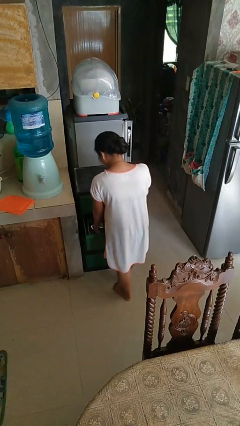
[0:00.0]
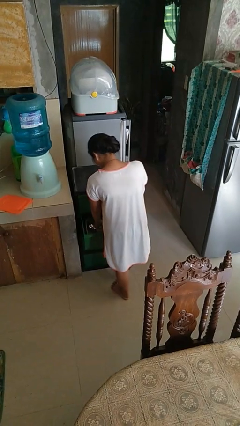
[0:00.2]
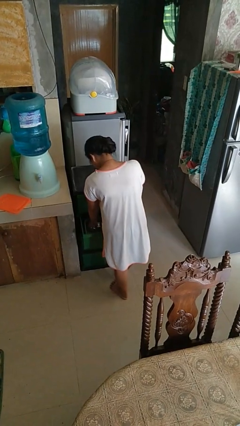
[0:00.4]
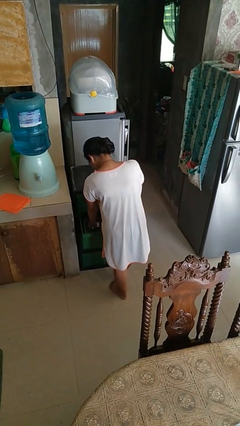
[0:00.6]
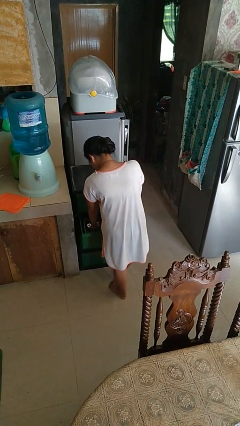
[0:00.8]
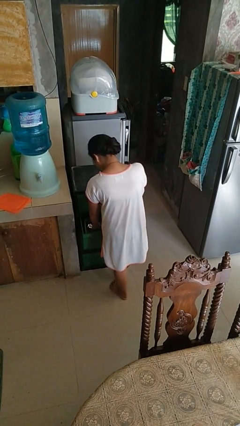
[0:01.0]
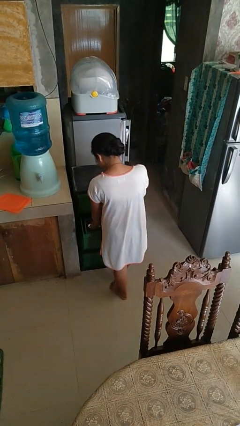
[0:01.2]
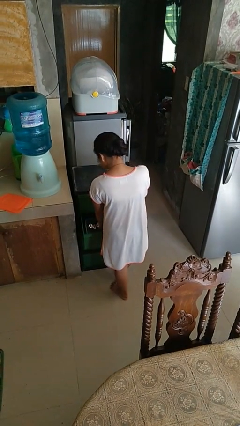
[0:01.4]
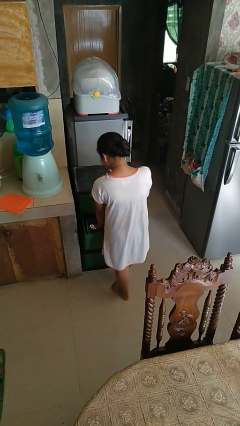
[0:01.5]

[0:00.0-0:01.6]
person searches in kitchen drawer

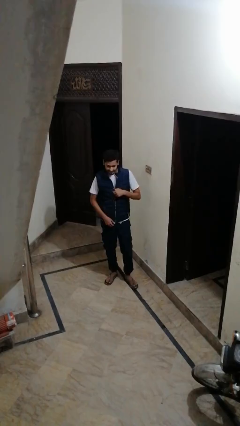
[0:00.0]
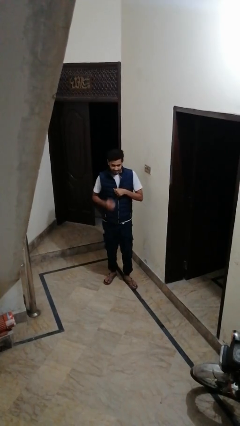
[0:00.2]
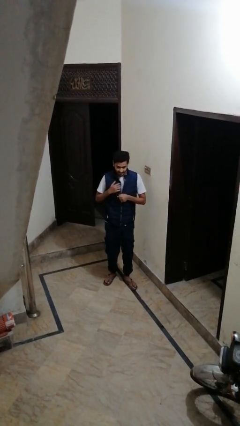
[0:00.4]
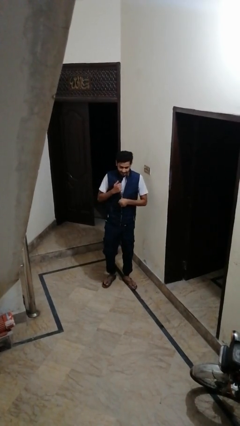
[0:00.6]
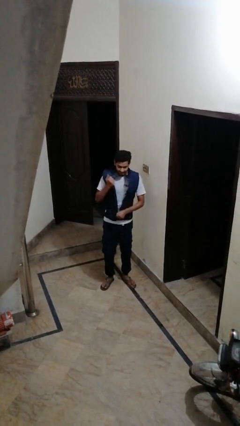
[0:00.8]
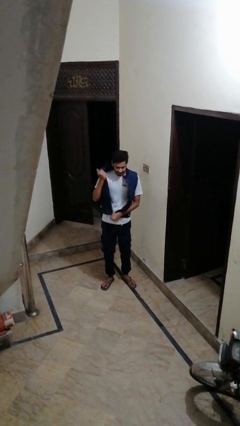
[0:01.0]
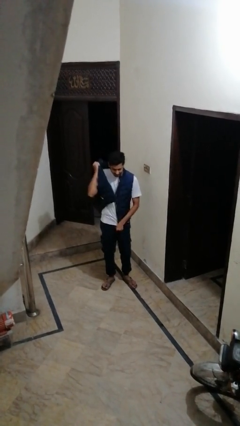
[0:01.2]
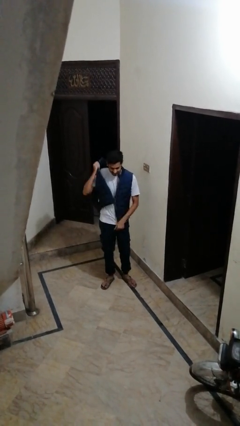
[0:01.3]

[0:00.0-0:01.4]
person unzips jacket

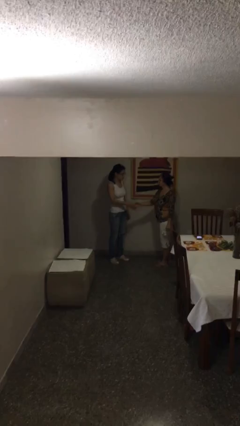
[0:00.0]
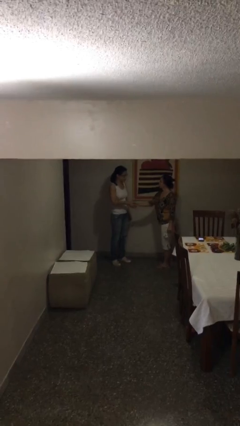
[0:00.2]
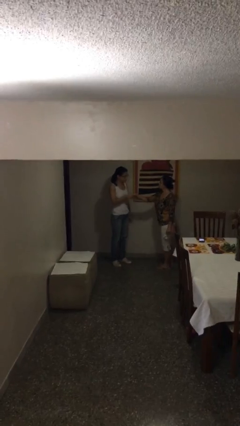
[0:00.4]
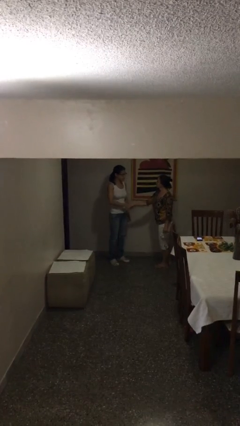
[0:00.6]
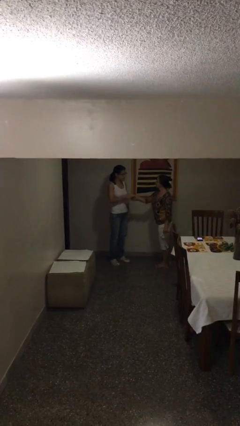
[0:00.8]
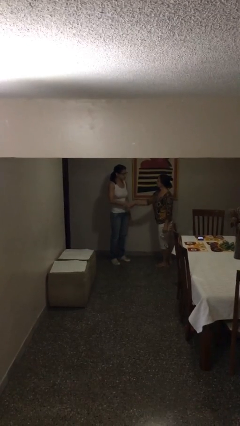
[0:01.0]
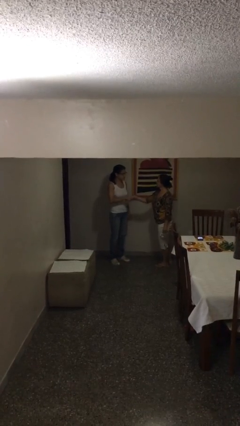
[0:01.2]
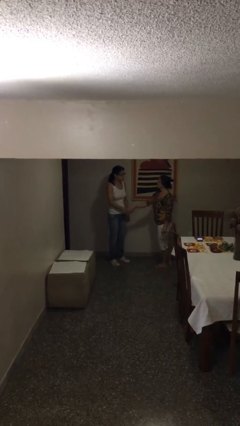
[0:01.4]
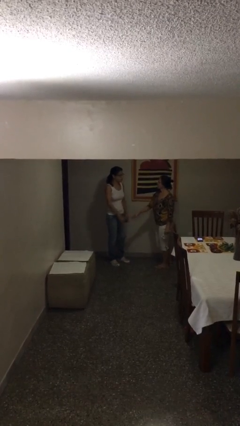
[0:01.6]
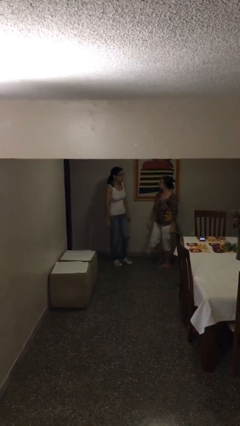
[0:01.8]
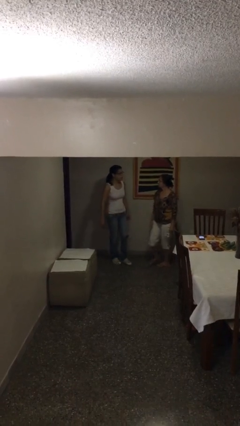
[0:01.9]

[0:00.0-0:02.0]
person shakes hand

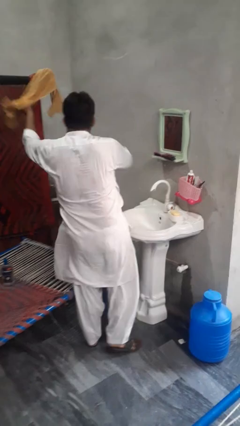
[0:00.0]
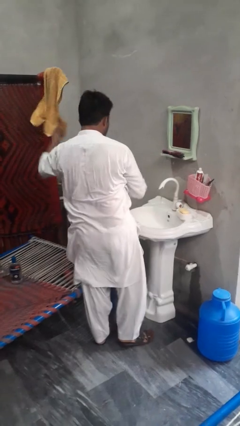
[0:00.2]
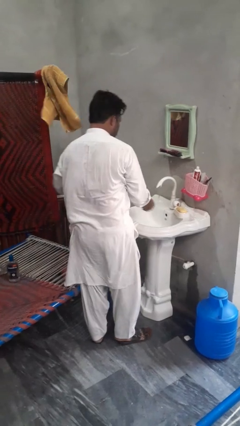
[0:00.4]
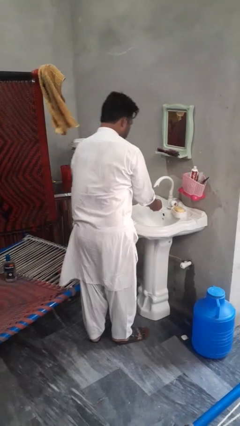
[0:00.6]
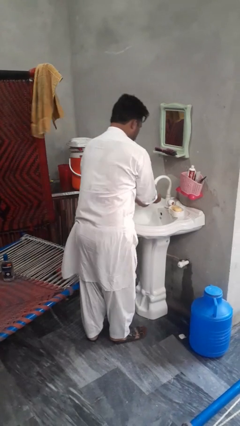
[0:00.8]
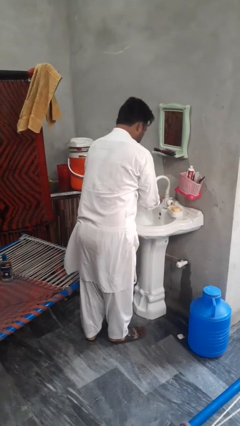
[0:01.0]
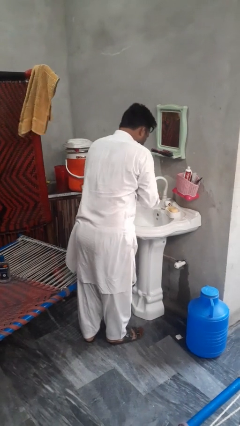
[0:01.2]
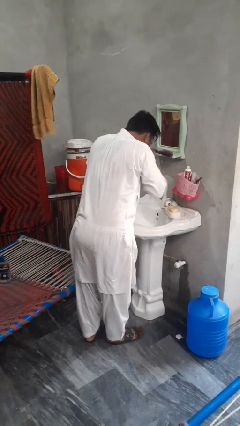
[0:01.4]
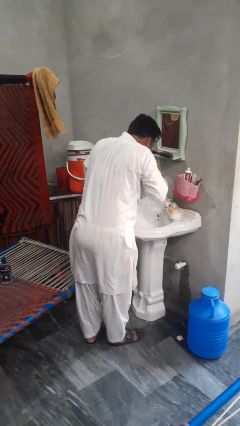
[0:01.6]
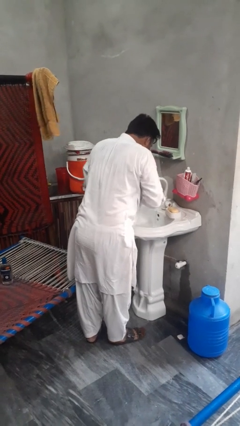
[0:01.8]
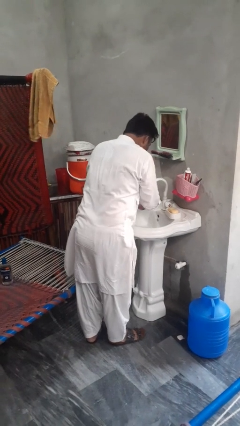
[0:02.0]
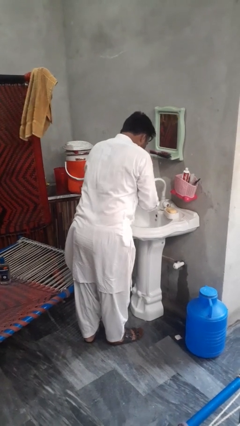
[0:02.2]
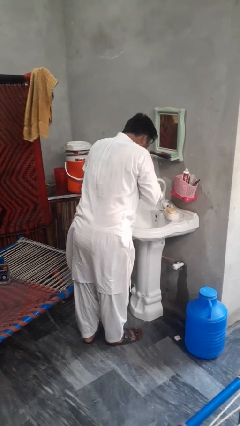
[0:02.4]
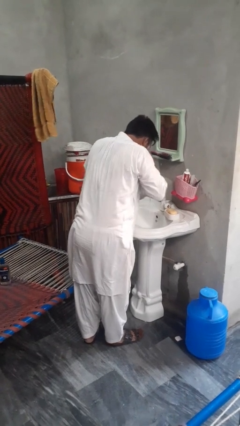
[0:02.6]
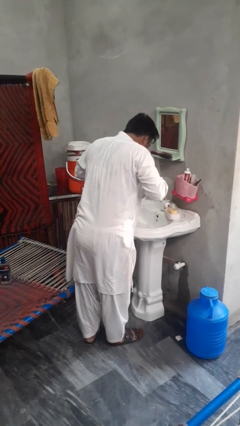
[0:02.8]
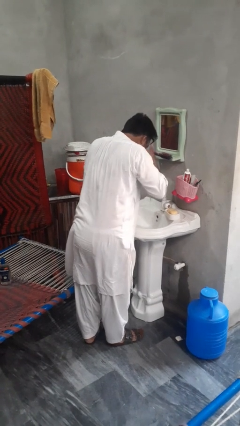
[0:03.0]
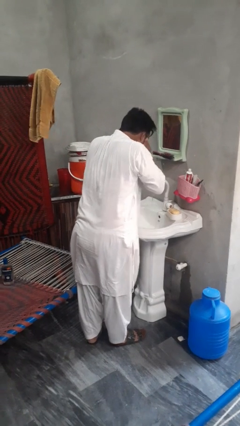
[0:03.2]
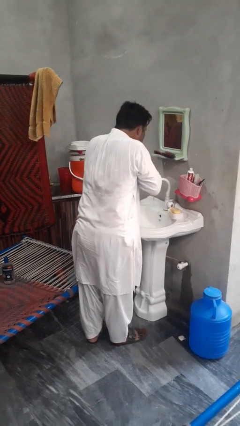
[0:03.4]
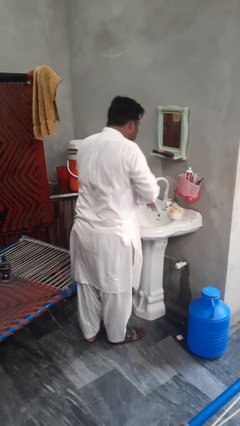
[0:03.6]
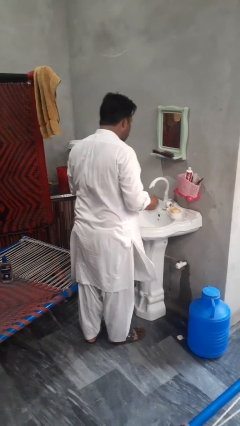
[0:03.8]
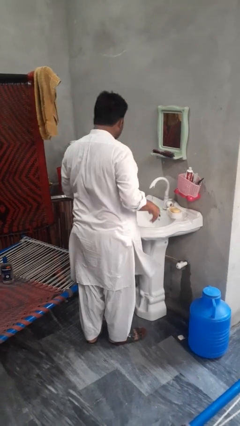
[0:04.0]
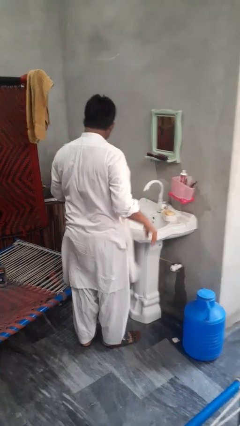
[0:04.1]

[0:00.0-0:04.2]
person washes face

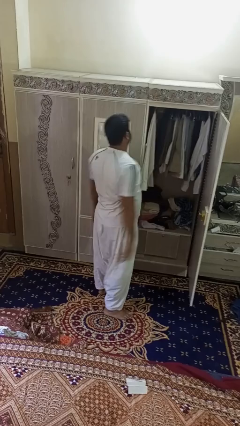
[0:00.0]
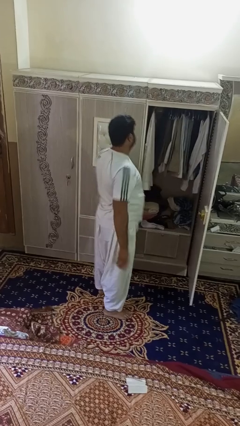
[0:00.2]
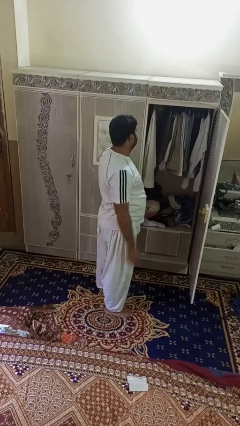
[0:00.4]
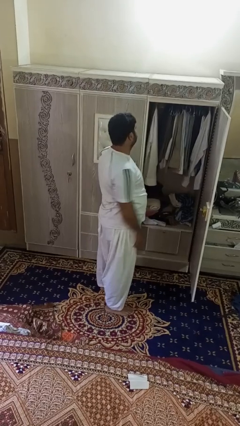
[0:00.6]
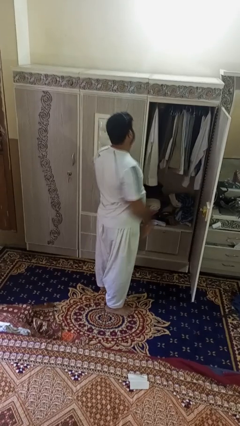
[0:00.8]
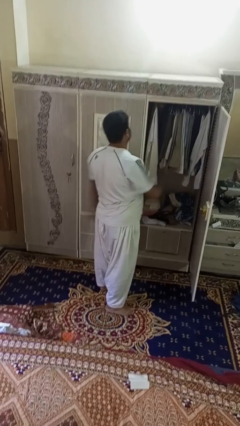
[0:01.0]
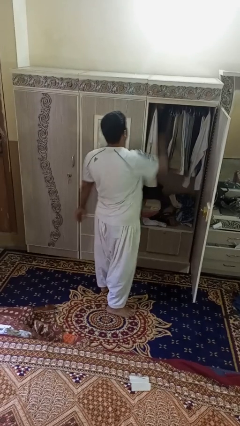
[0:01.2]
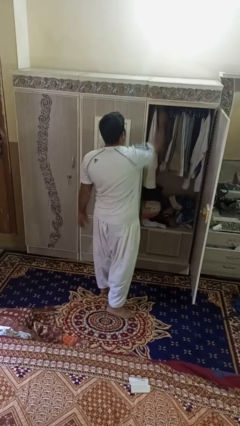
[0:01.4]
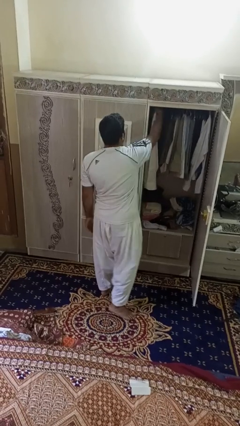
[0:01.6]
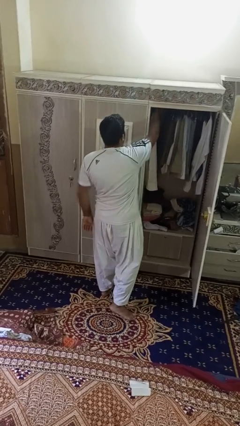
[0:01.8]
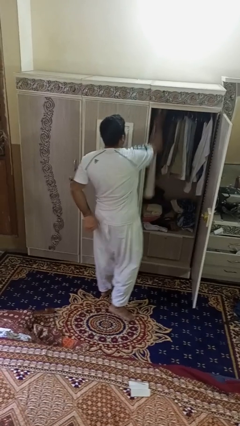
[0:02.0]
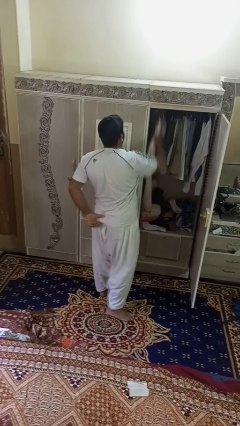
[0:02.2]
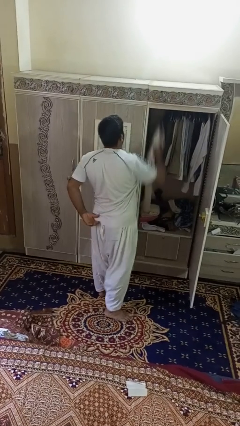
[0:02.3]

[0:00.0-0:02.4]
person takes clothes from closet

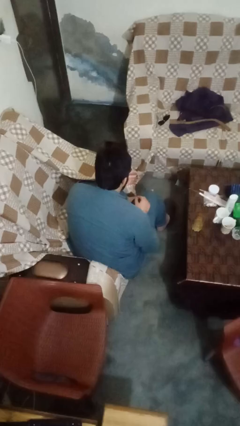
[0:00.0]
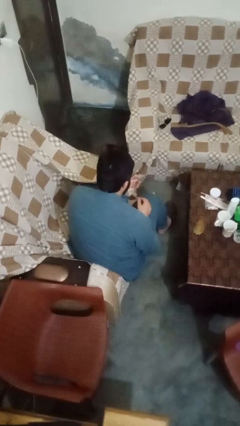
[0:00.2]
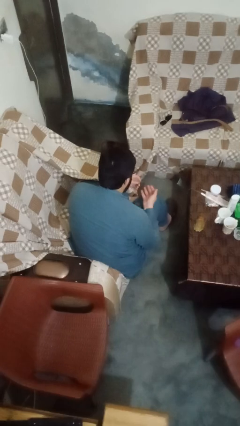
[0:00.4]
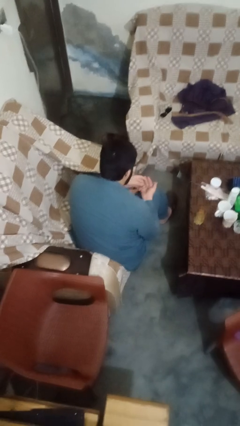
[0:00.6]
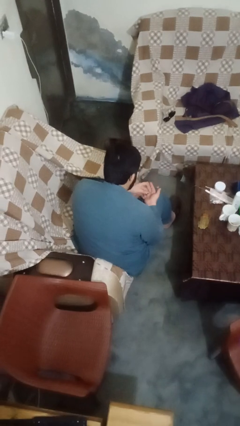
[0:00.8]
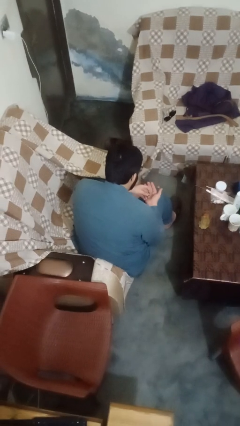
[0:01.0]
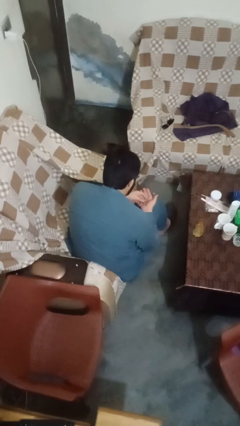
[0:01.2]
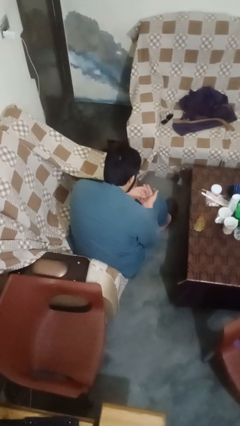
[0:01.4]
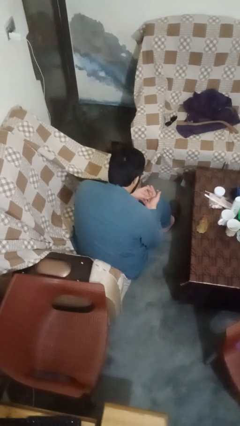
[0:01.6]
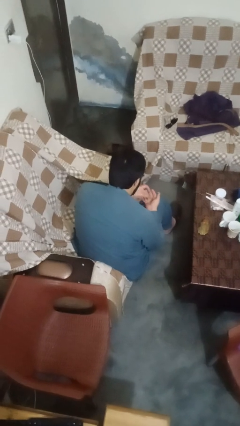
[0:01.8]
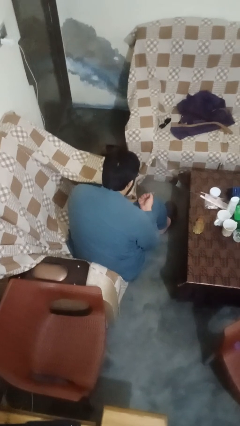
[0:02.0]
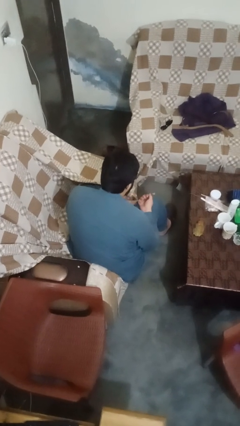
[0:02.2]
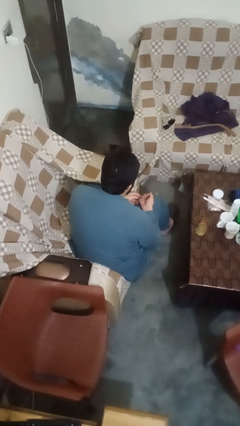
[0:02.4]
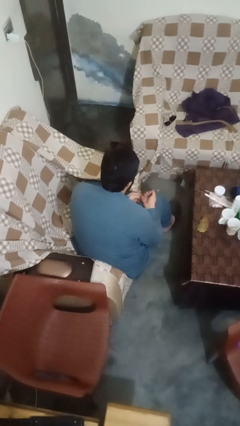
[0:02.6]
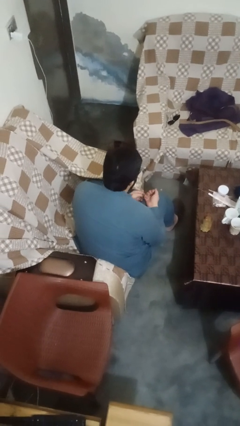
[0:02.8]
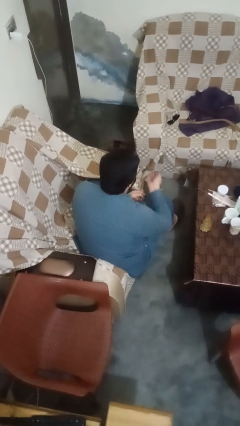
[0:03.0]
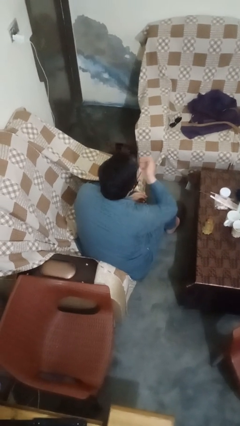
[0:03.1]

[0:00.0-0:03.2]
person takes medicine pills

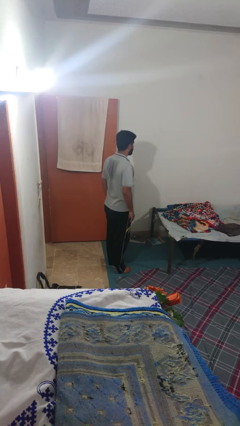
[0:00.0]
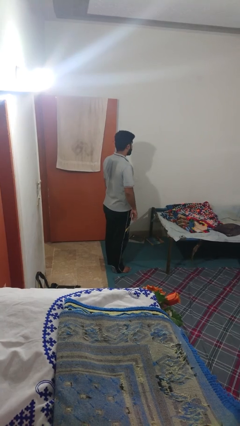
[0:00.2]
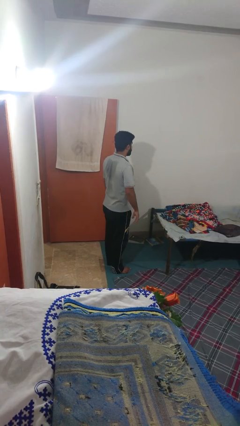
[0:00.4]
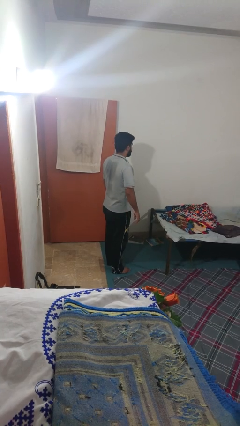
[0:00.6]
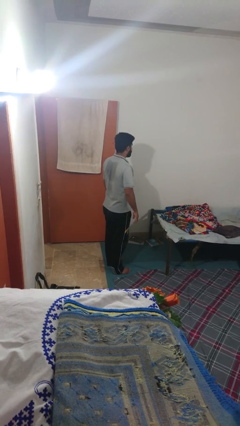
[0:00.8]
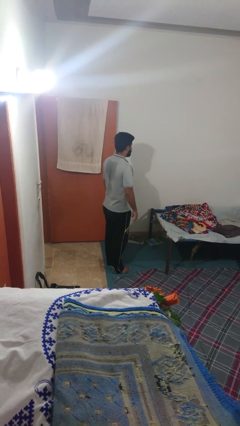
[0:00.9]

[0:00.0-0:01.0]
person covers face with hands

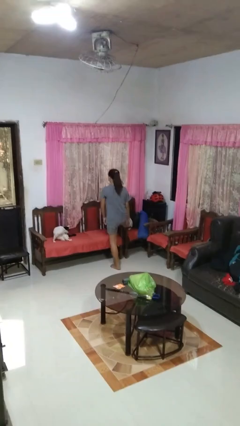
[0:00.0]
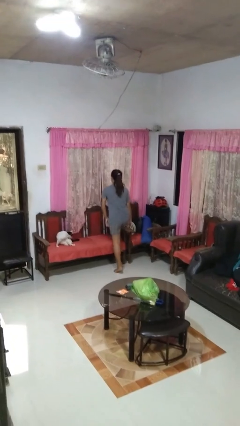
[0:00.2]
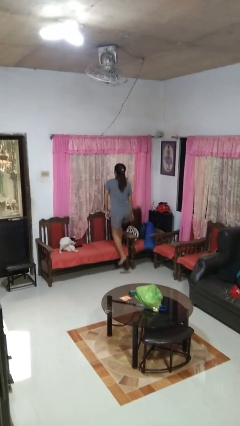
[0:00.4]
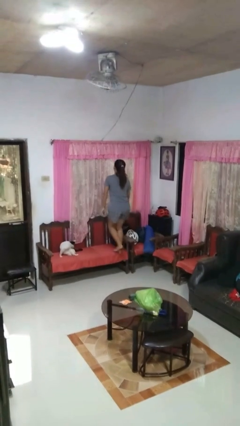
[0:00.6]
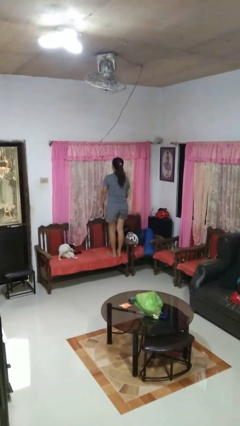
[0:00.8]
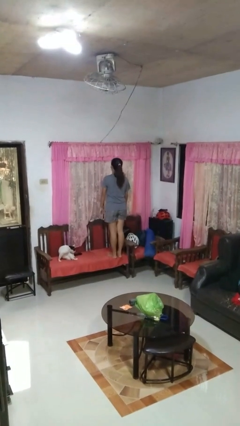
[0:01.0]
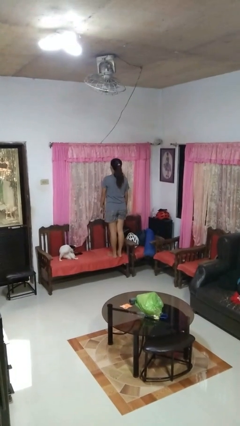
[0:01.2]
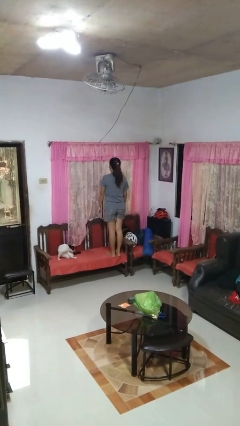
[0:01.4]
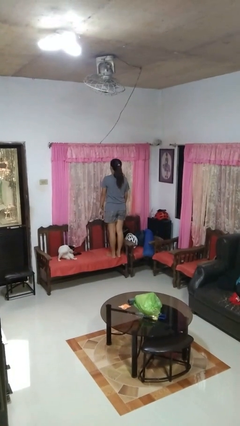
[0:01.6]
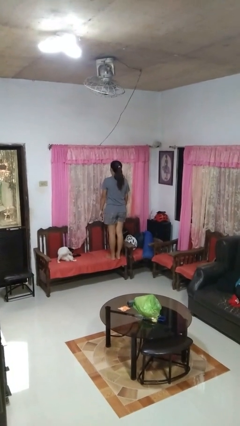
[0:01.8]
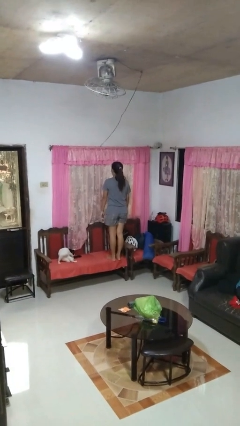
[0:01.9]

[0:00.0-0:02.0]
person climbs on chair
